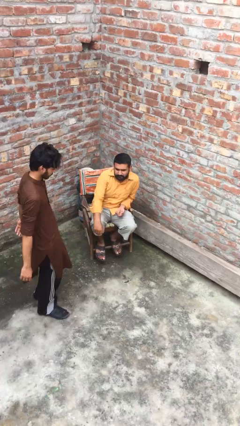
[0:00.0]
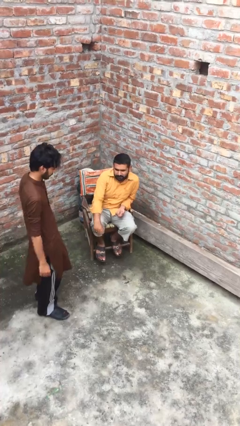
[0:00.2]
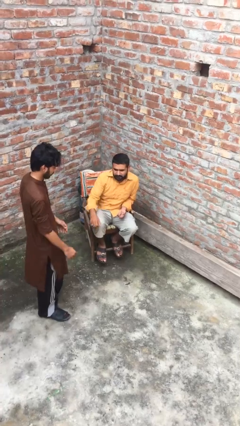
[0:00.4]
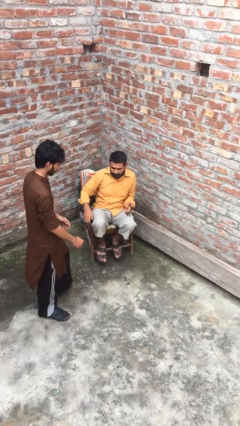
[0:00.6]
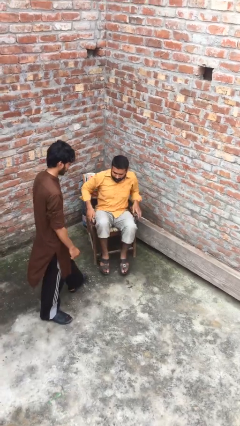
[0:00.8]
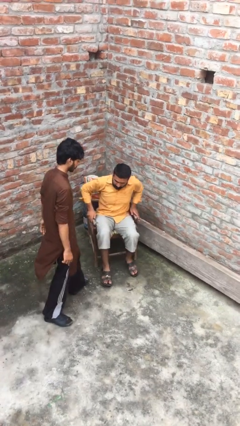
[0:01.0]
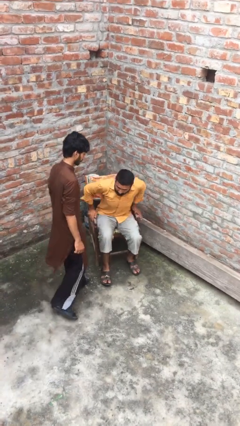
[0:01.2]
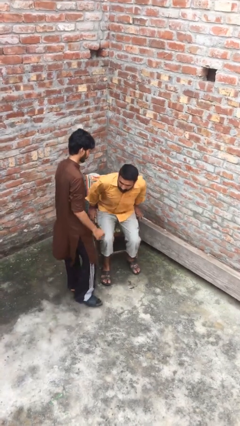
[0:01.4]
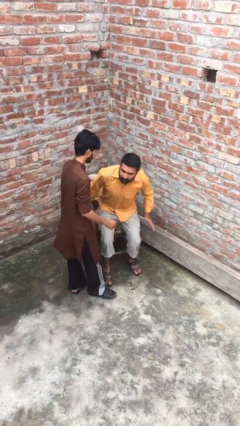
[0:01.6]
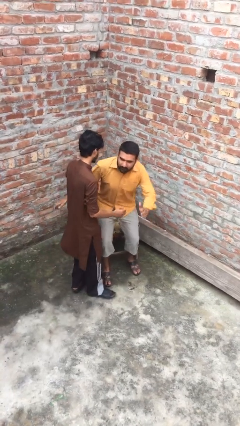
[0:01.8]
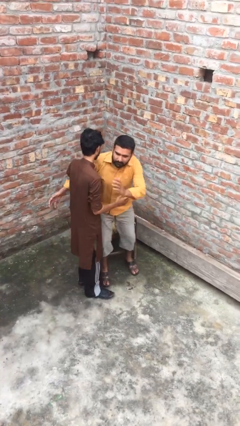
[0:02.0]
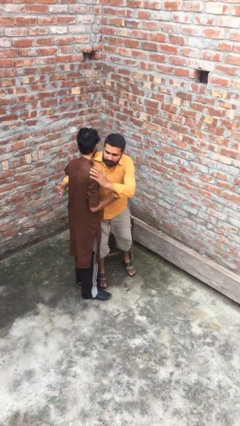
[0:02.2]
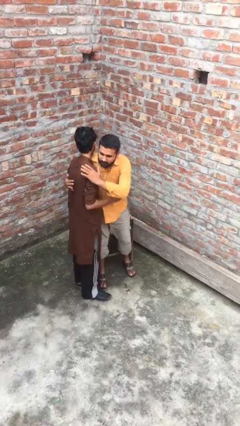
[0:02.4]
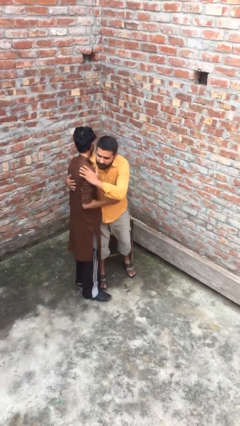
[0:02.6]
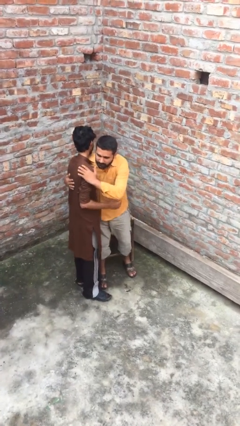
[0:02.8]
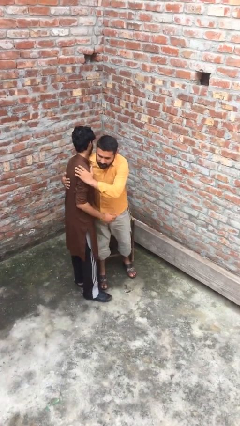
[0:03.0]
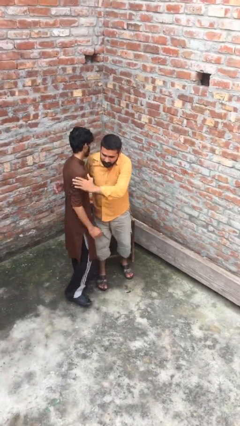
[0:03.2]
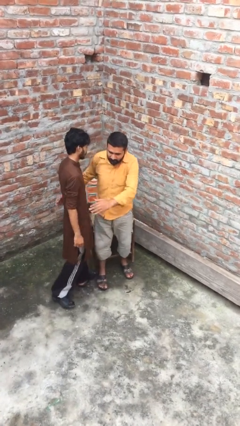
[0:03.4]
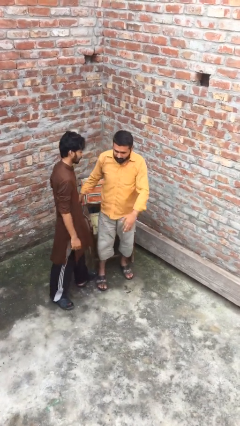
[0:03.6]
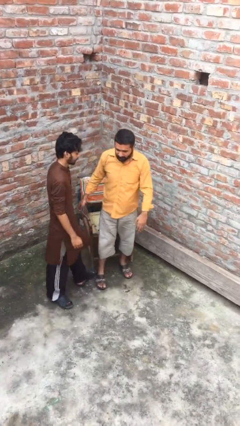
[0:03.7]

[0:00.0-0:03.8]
person embraces person

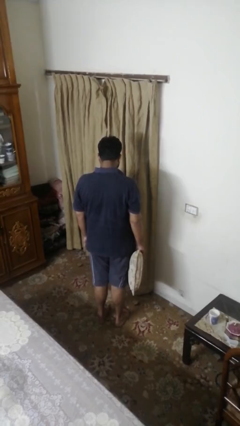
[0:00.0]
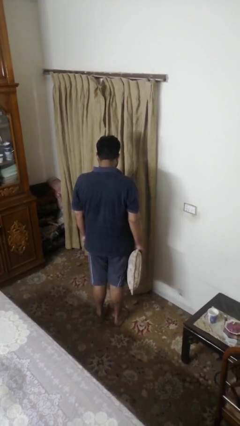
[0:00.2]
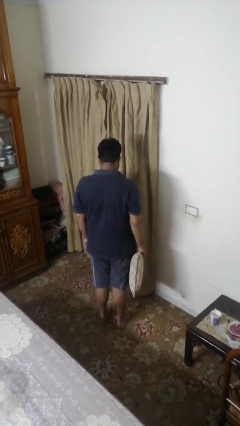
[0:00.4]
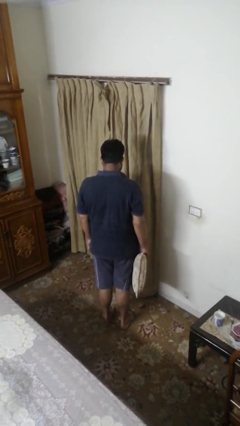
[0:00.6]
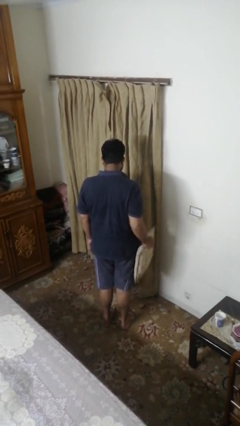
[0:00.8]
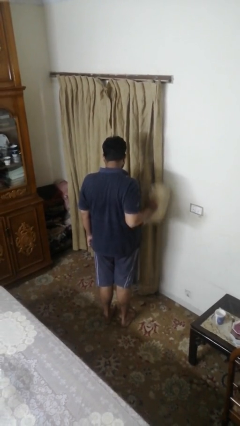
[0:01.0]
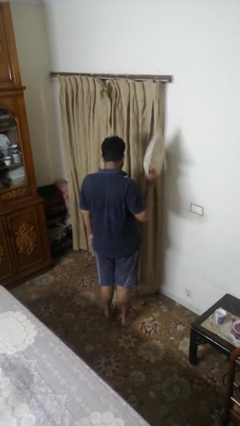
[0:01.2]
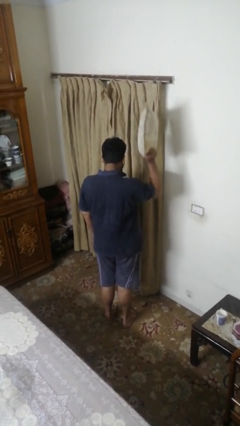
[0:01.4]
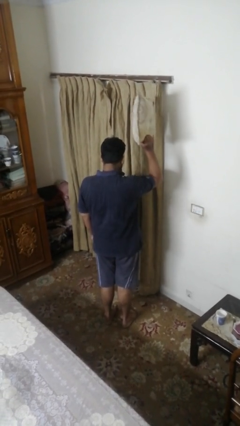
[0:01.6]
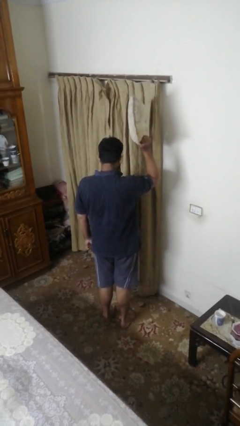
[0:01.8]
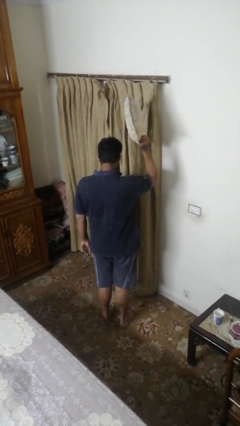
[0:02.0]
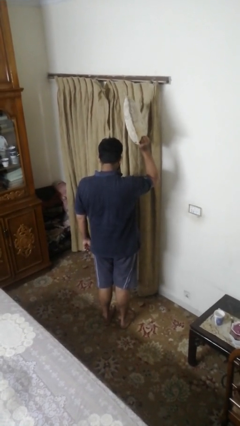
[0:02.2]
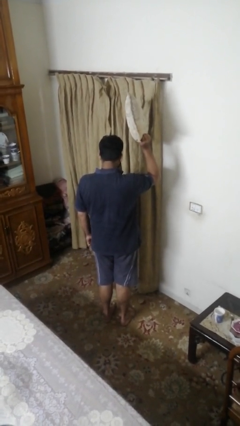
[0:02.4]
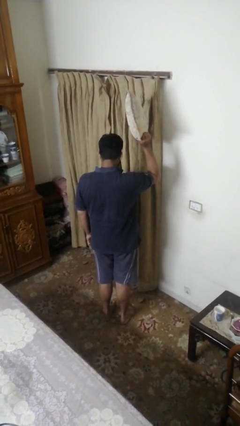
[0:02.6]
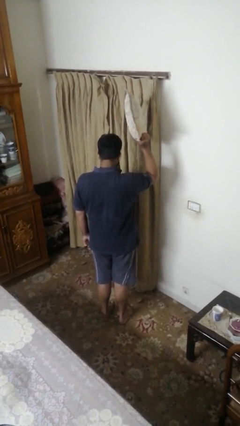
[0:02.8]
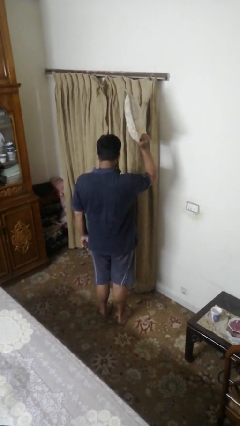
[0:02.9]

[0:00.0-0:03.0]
person holds object above head

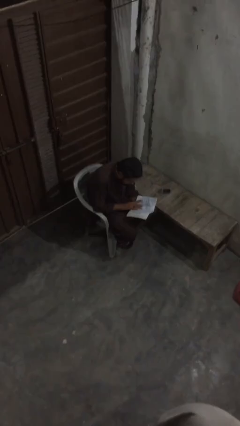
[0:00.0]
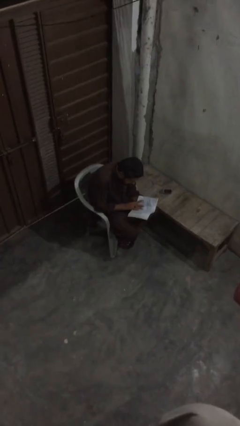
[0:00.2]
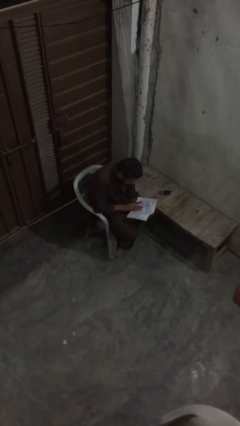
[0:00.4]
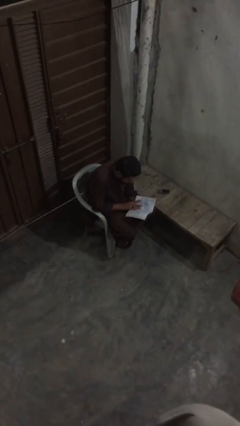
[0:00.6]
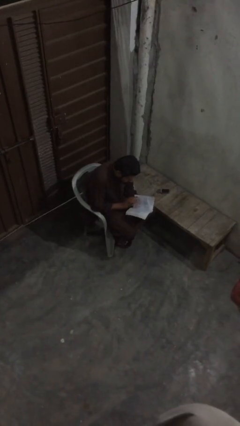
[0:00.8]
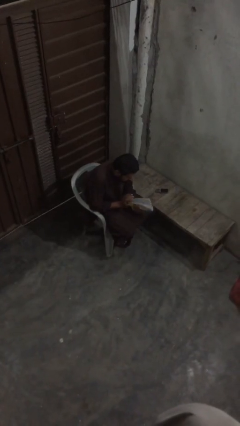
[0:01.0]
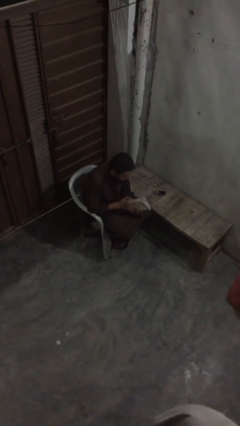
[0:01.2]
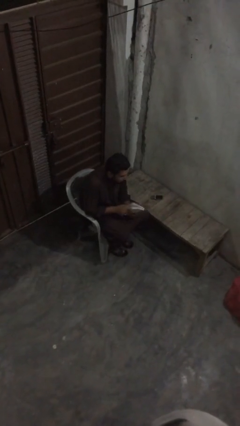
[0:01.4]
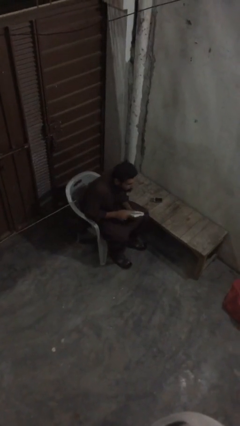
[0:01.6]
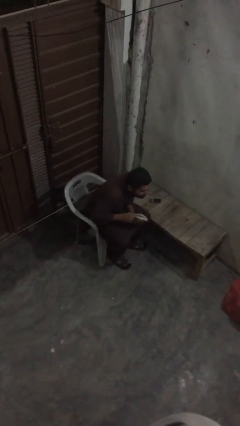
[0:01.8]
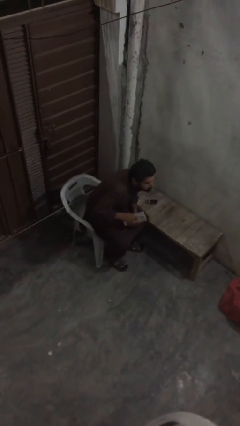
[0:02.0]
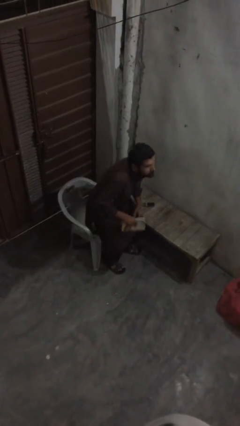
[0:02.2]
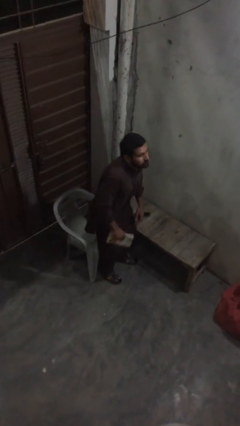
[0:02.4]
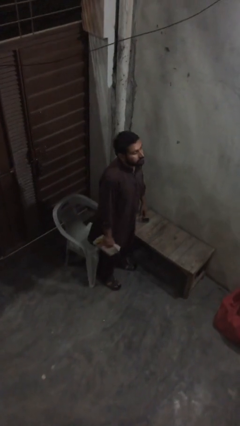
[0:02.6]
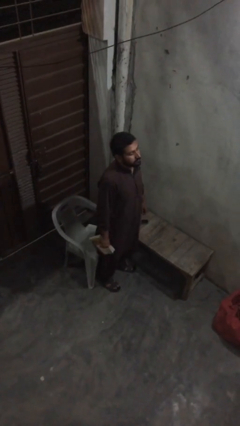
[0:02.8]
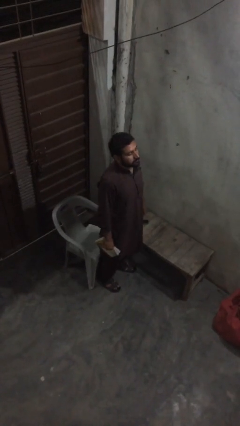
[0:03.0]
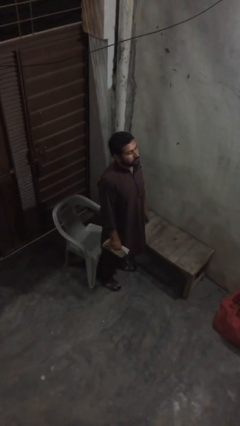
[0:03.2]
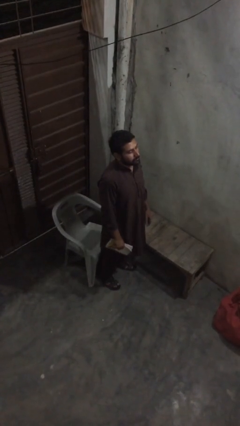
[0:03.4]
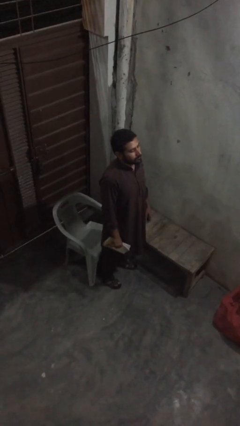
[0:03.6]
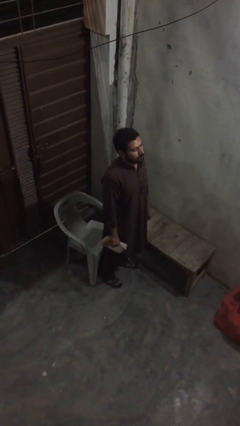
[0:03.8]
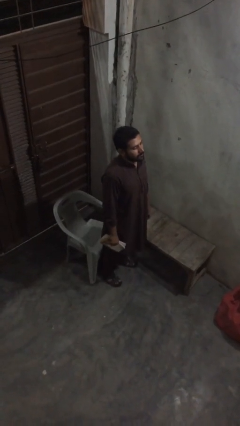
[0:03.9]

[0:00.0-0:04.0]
person stands up

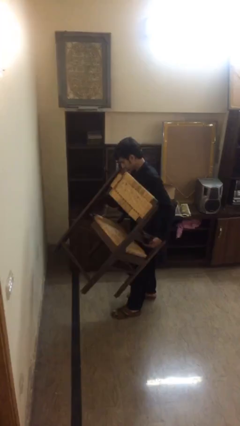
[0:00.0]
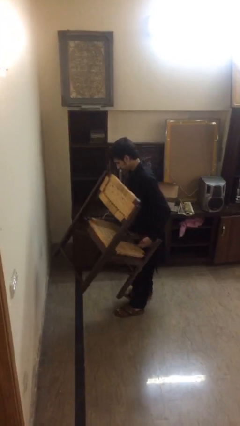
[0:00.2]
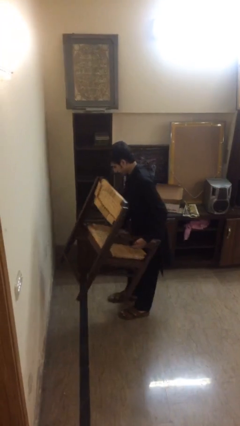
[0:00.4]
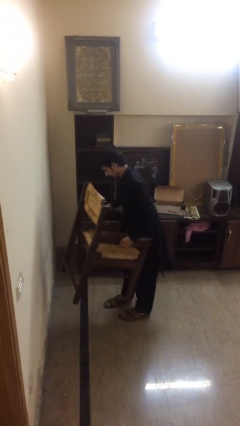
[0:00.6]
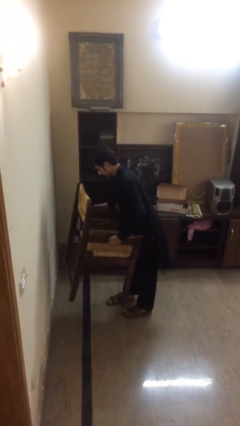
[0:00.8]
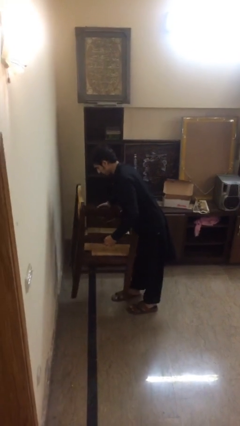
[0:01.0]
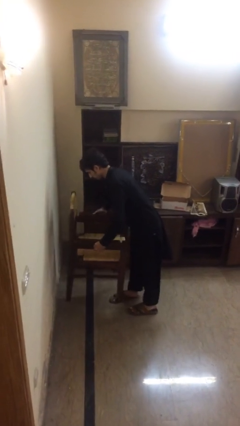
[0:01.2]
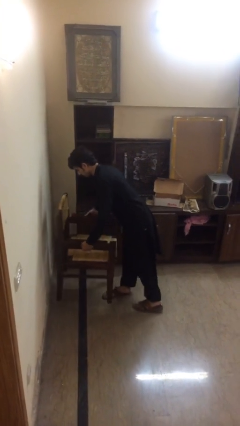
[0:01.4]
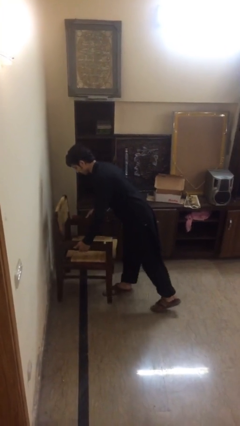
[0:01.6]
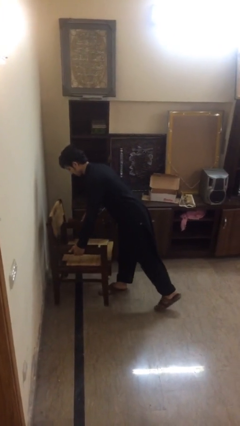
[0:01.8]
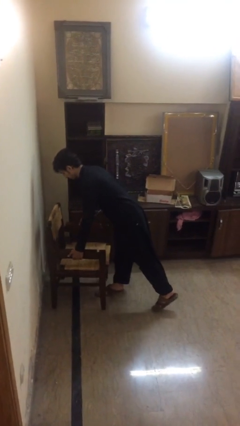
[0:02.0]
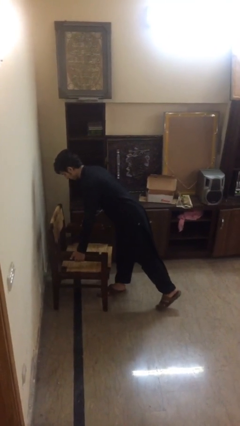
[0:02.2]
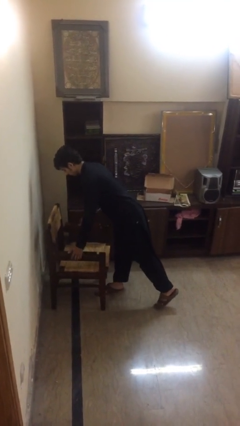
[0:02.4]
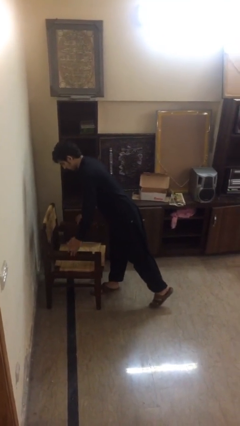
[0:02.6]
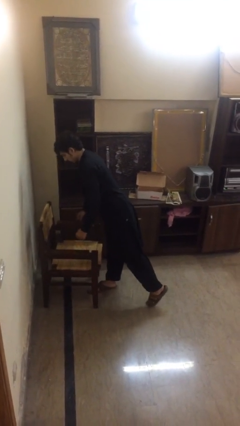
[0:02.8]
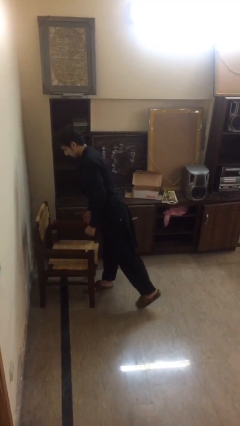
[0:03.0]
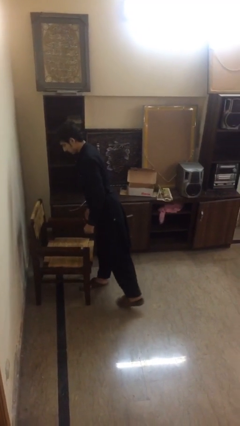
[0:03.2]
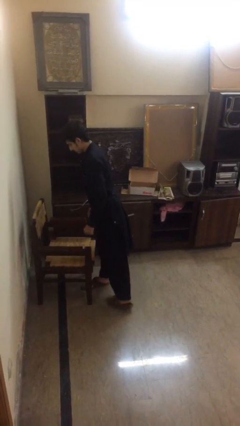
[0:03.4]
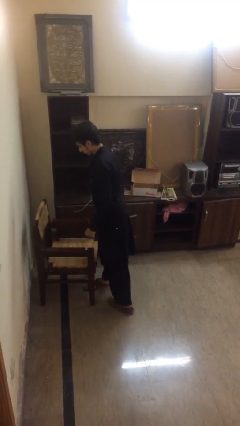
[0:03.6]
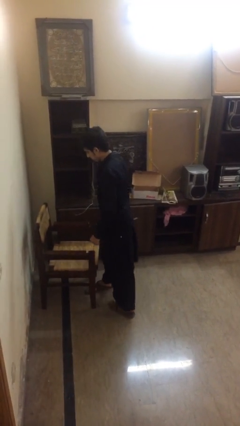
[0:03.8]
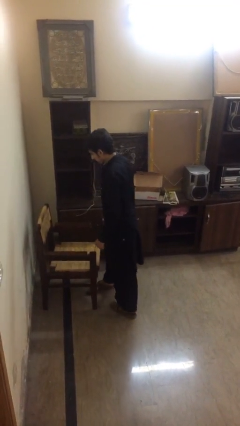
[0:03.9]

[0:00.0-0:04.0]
person puts down object on floor

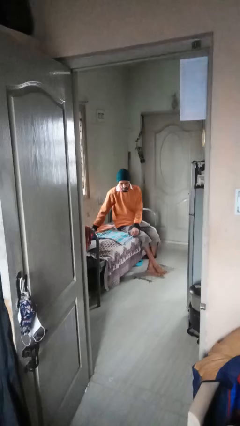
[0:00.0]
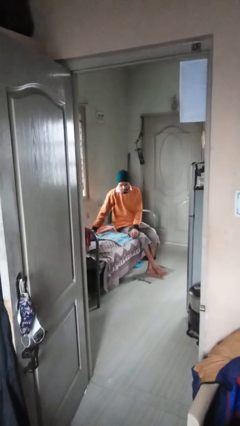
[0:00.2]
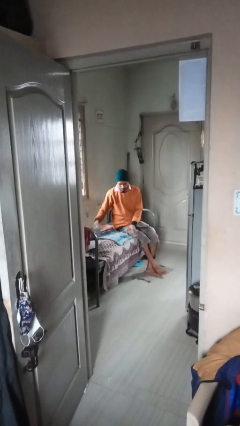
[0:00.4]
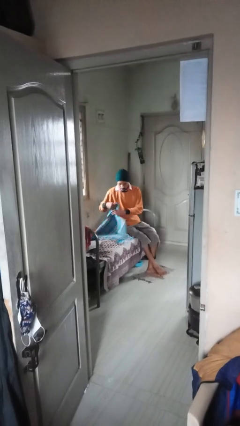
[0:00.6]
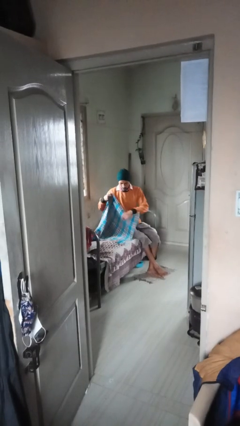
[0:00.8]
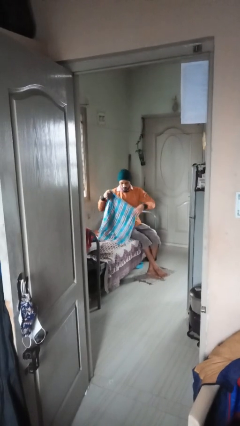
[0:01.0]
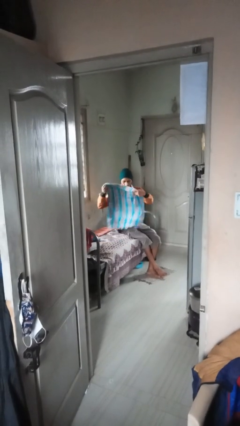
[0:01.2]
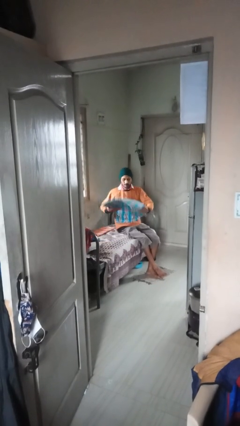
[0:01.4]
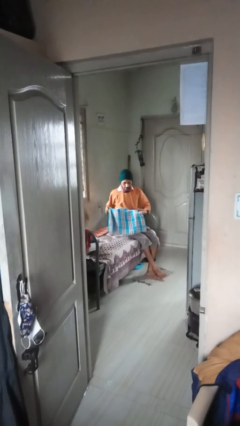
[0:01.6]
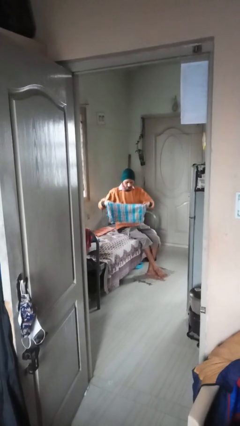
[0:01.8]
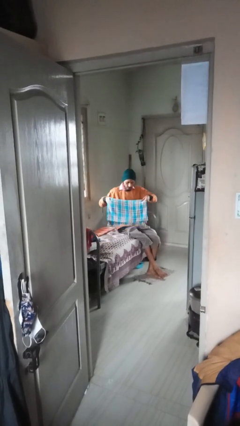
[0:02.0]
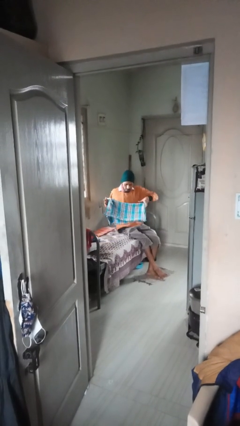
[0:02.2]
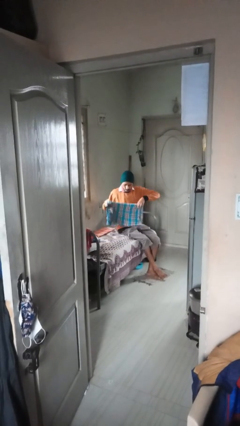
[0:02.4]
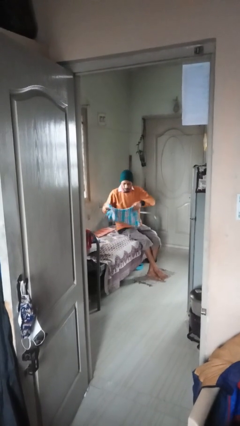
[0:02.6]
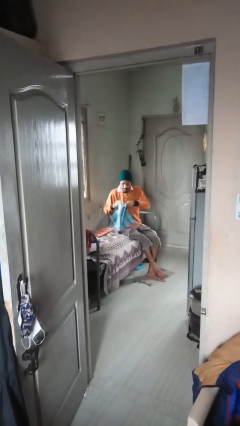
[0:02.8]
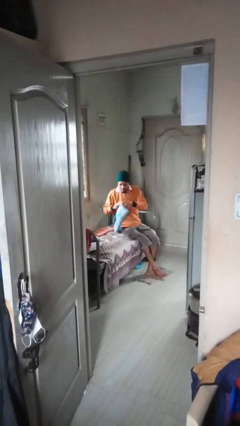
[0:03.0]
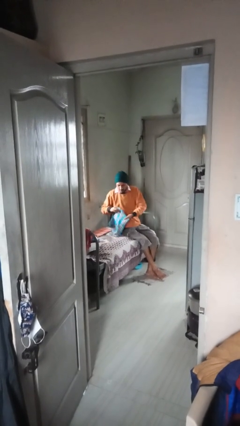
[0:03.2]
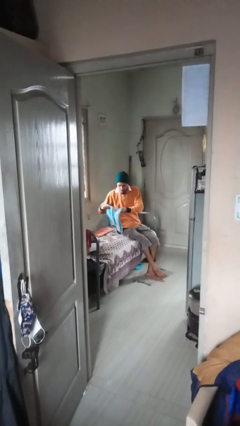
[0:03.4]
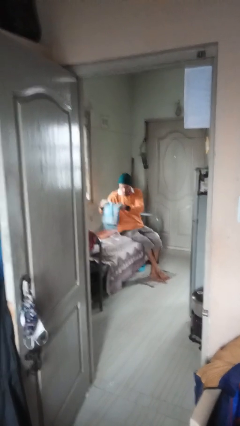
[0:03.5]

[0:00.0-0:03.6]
person folds towel
